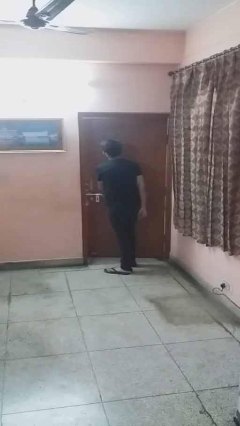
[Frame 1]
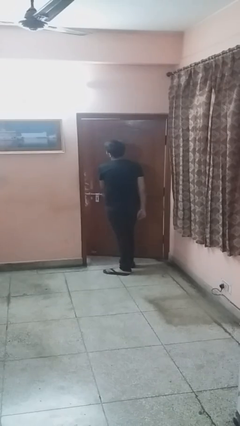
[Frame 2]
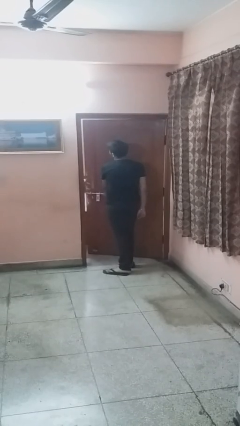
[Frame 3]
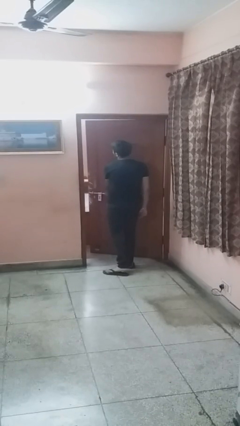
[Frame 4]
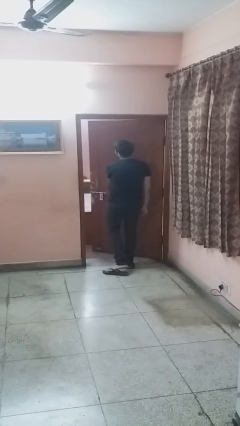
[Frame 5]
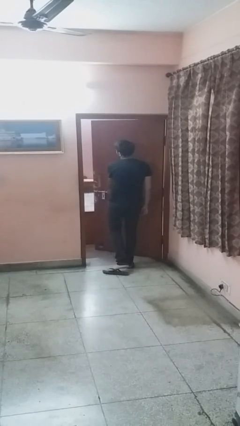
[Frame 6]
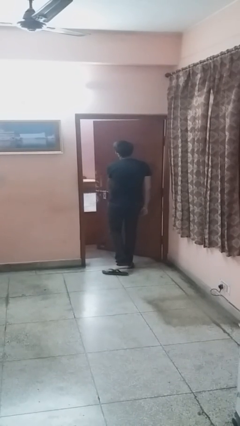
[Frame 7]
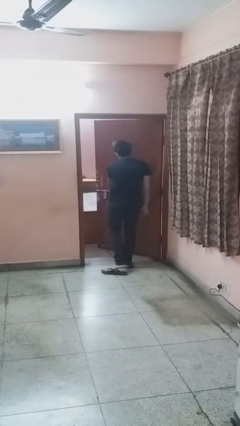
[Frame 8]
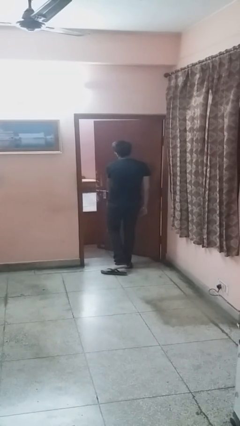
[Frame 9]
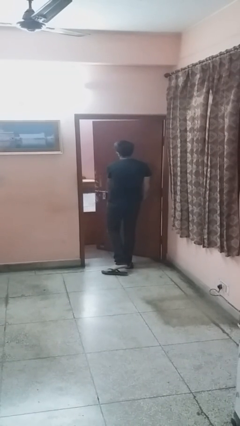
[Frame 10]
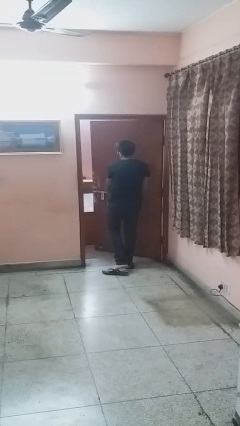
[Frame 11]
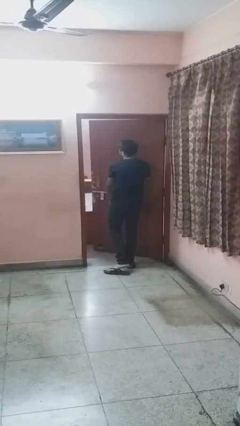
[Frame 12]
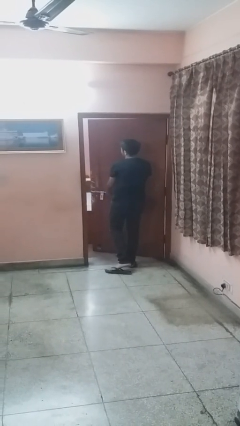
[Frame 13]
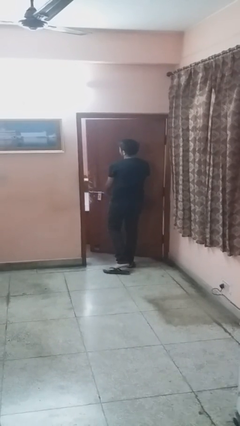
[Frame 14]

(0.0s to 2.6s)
person opens facility door

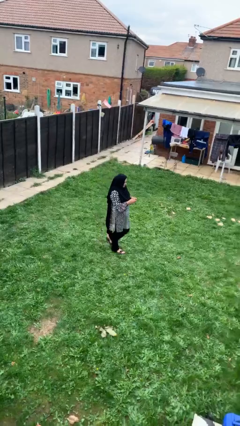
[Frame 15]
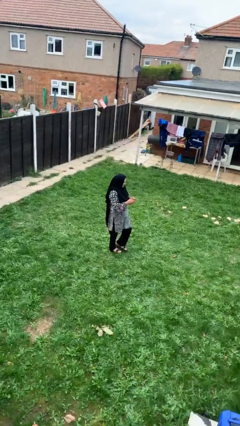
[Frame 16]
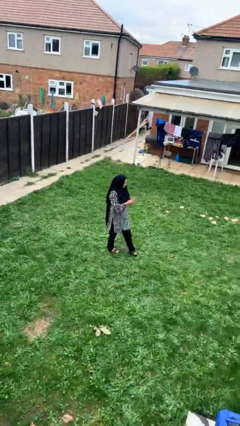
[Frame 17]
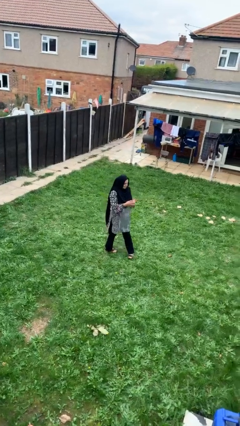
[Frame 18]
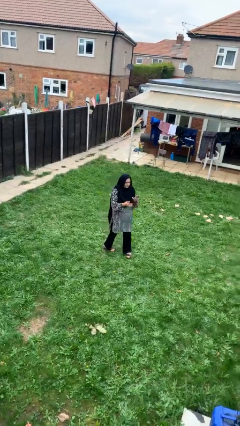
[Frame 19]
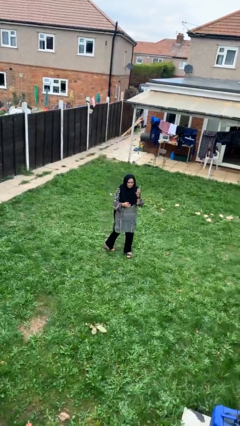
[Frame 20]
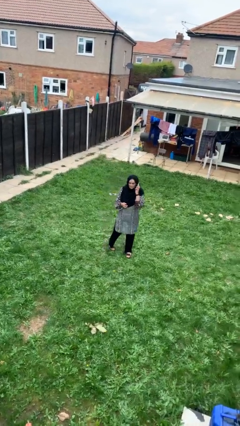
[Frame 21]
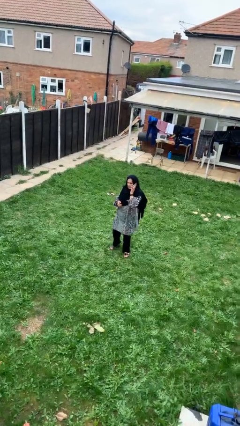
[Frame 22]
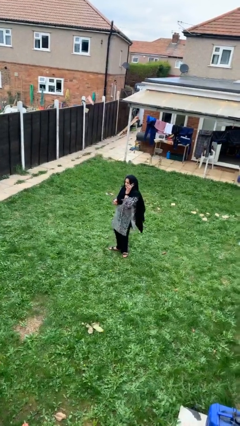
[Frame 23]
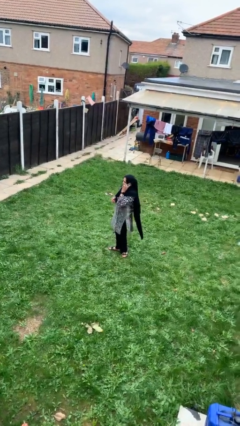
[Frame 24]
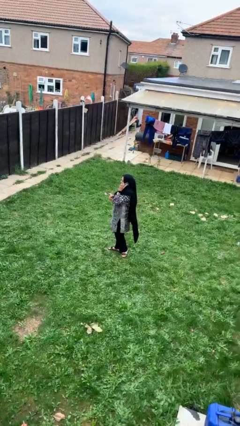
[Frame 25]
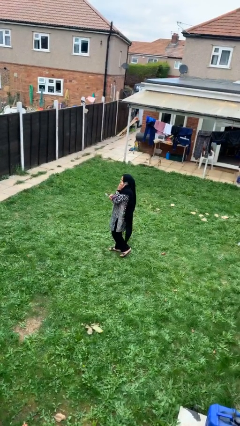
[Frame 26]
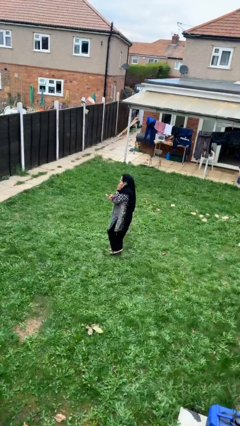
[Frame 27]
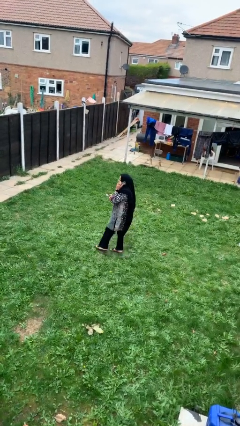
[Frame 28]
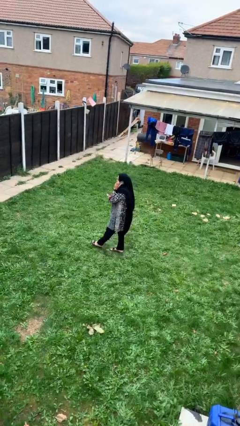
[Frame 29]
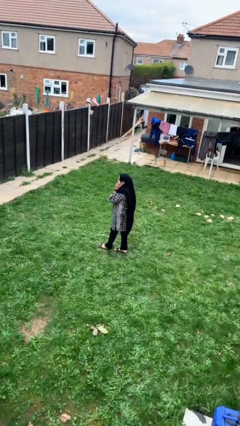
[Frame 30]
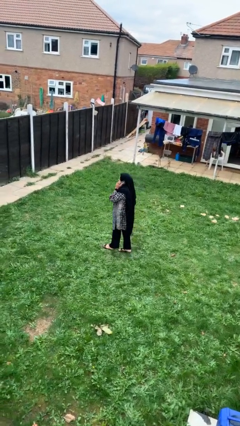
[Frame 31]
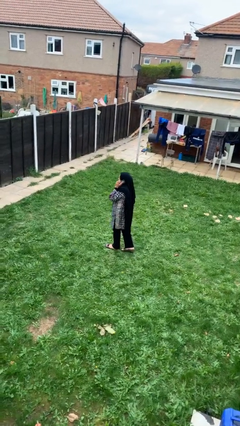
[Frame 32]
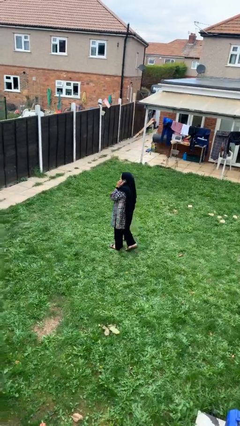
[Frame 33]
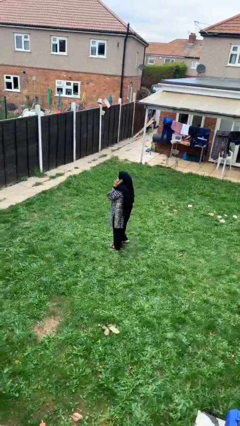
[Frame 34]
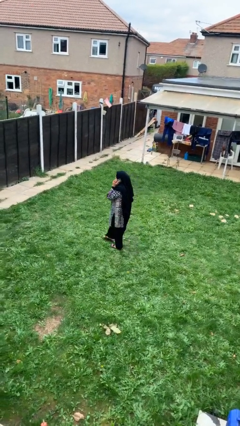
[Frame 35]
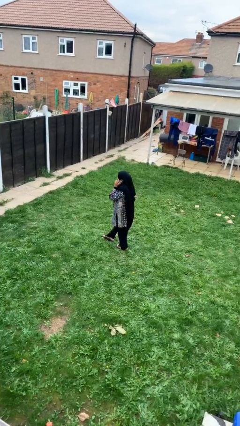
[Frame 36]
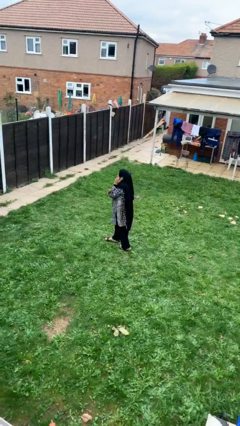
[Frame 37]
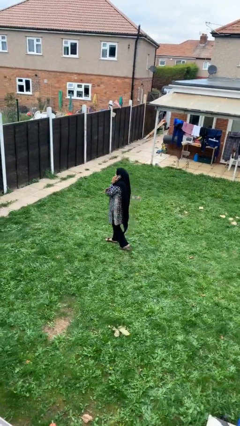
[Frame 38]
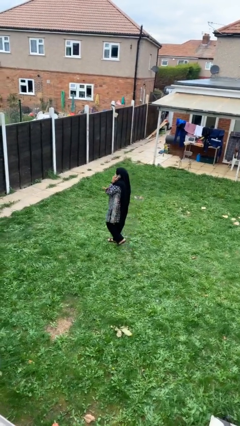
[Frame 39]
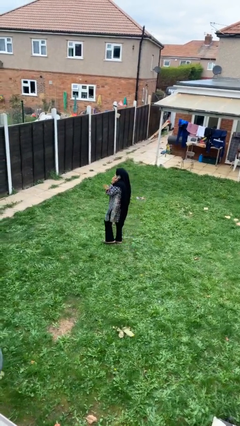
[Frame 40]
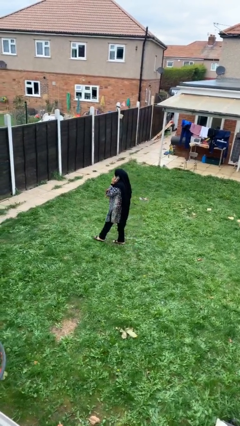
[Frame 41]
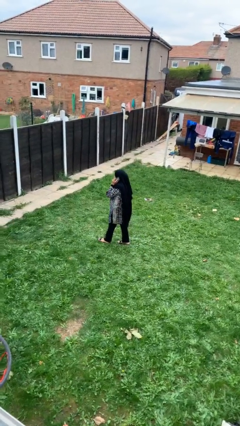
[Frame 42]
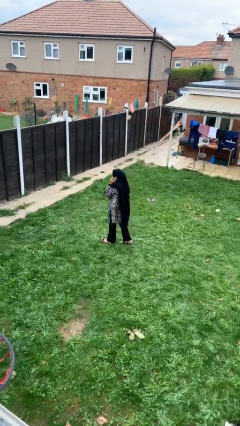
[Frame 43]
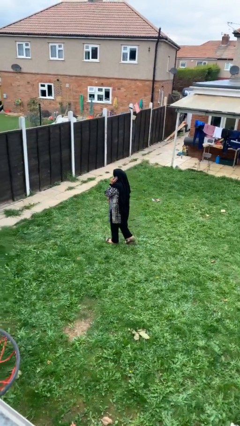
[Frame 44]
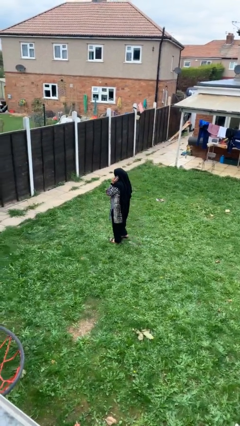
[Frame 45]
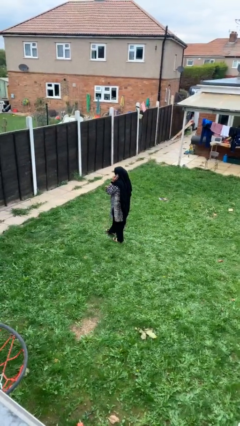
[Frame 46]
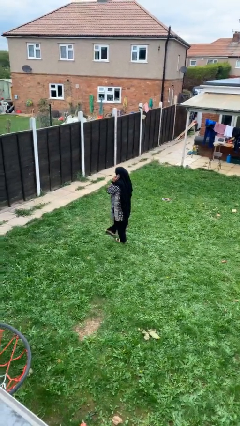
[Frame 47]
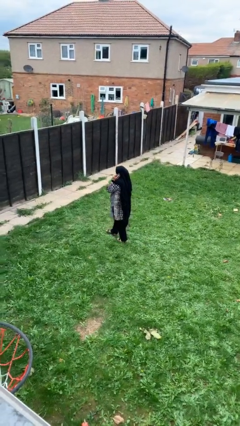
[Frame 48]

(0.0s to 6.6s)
person talks on phone

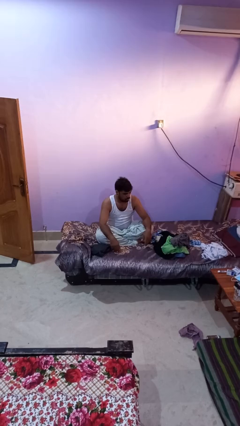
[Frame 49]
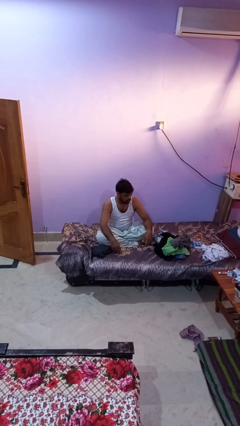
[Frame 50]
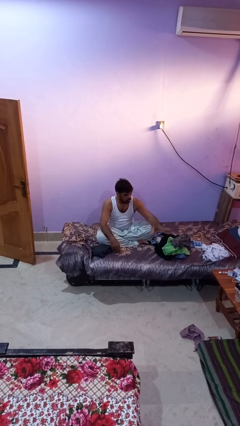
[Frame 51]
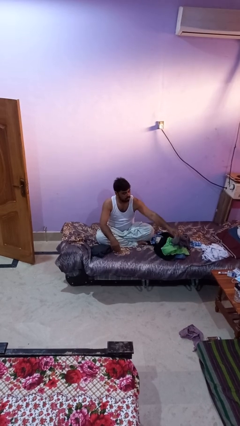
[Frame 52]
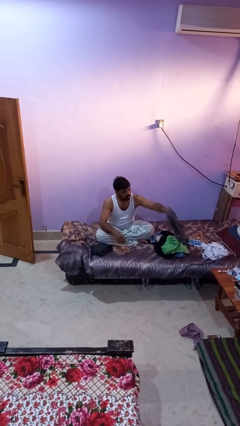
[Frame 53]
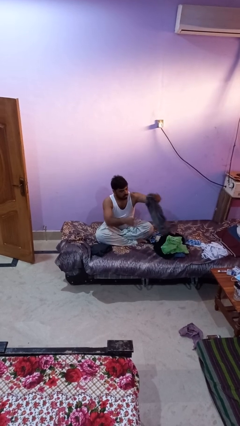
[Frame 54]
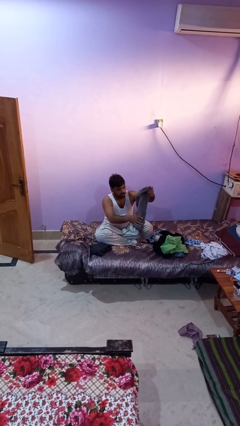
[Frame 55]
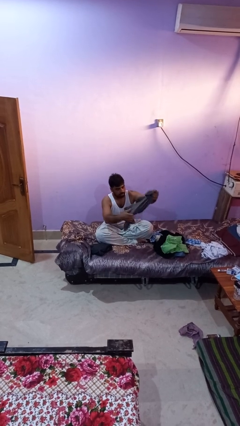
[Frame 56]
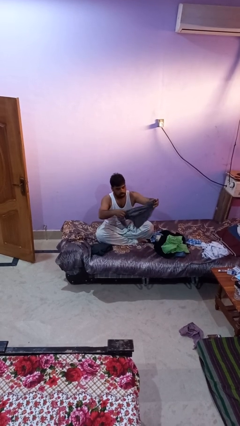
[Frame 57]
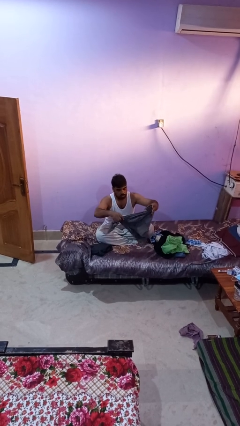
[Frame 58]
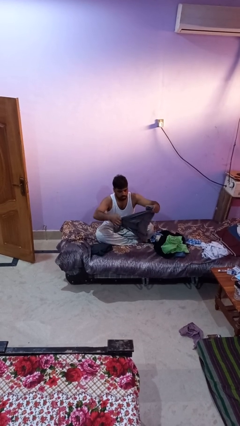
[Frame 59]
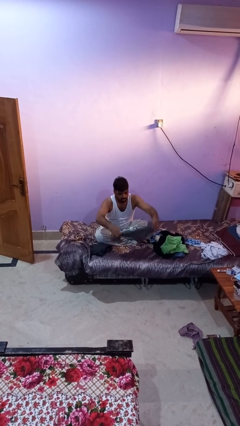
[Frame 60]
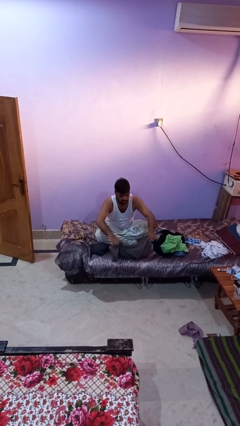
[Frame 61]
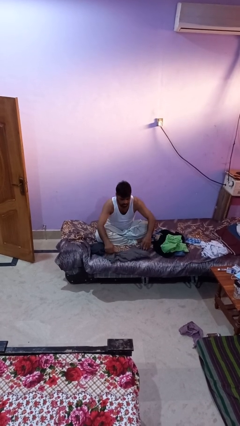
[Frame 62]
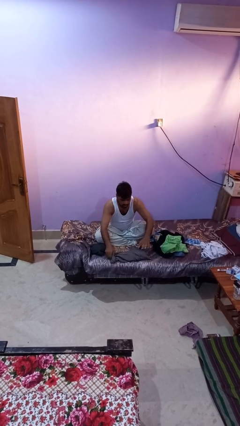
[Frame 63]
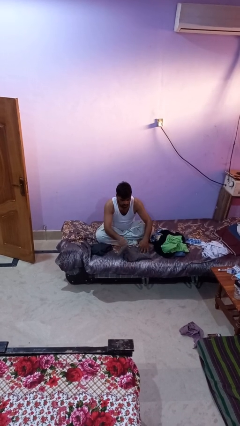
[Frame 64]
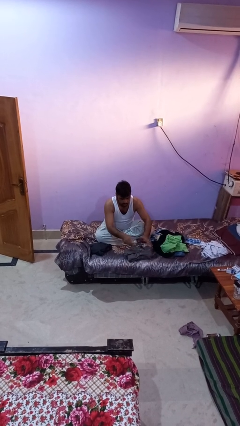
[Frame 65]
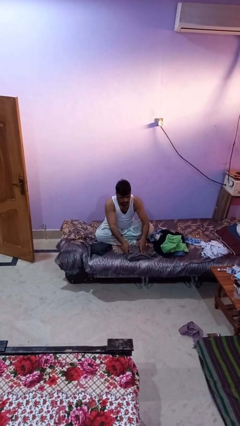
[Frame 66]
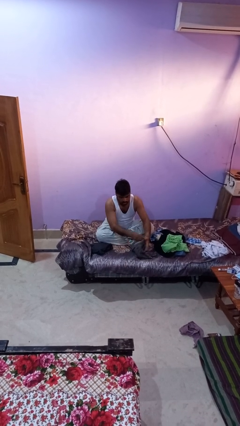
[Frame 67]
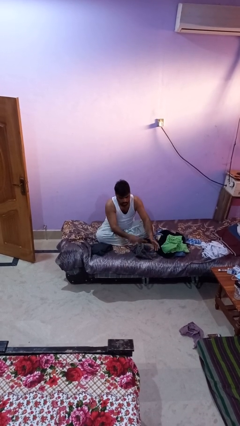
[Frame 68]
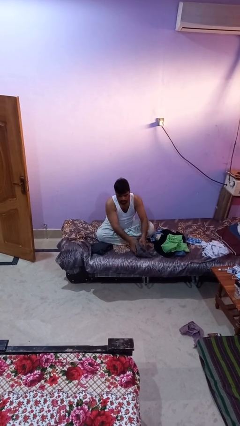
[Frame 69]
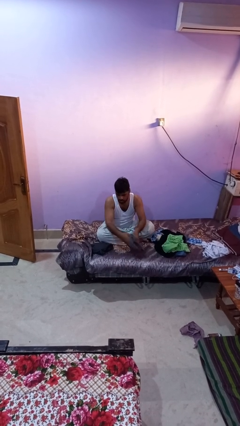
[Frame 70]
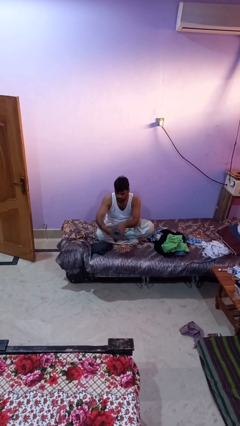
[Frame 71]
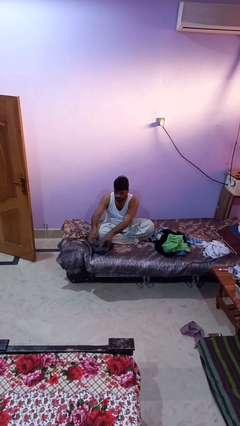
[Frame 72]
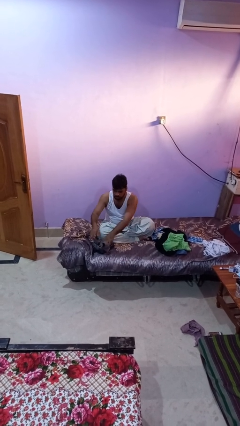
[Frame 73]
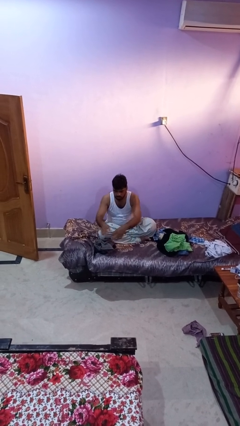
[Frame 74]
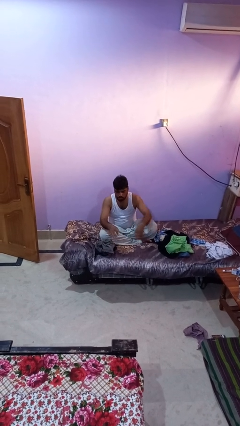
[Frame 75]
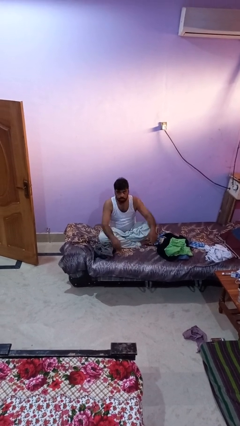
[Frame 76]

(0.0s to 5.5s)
person folds shirt

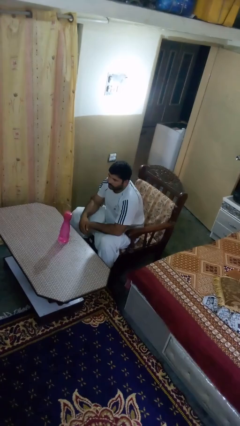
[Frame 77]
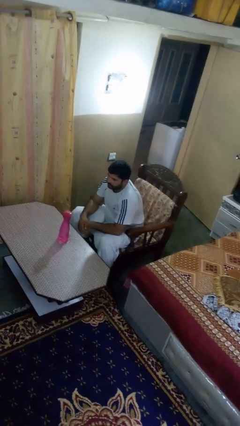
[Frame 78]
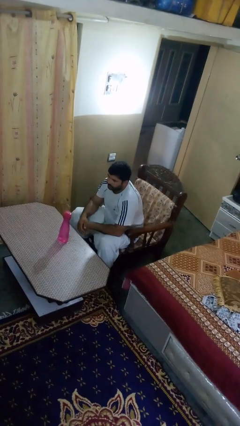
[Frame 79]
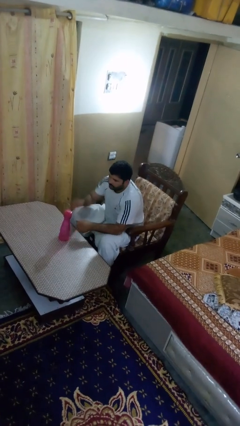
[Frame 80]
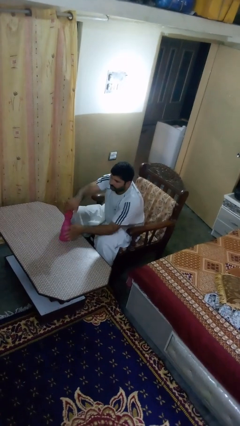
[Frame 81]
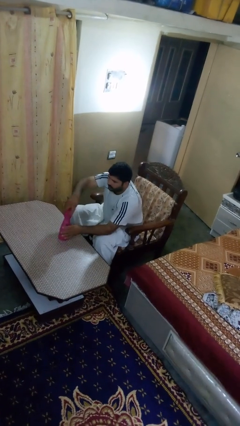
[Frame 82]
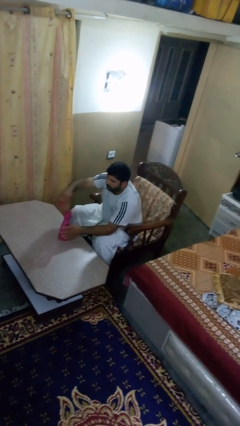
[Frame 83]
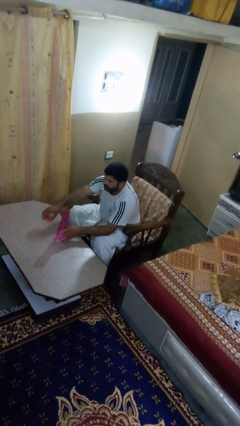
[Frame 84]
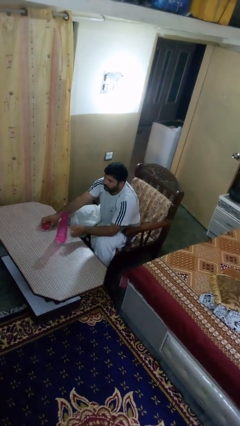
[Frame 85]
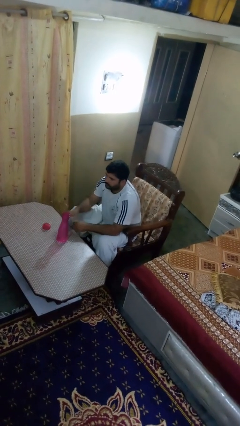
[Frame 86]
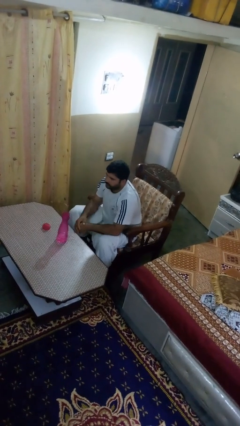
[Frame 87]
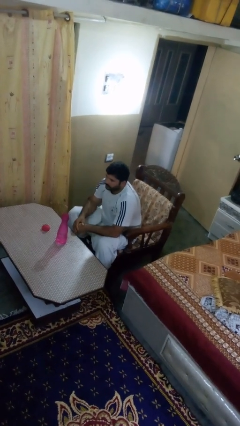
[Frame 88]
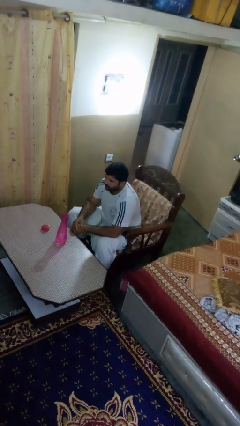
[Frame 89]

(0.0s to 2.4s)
person unscrews lid from bottle

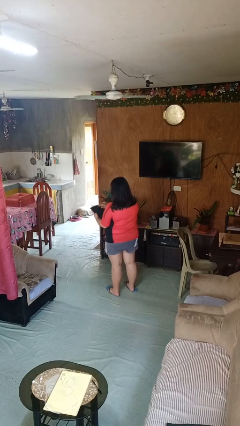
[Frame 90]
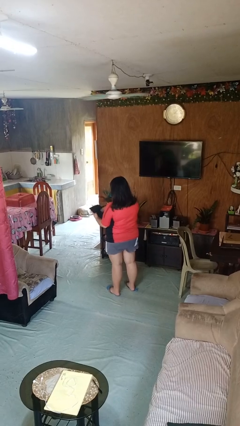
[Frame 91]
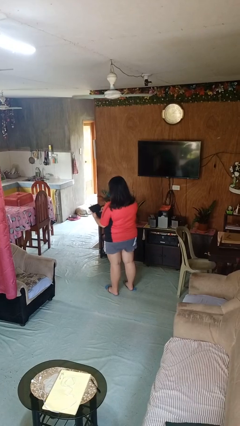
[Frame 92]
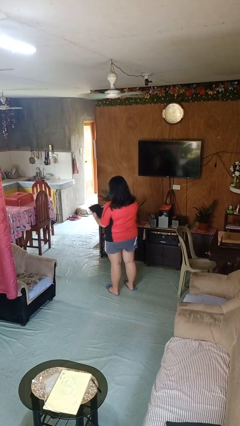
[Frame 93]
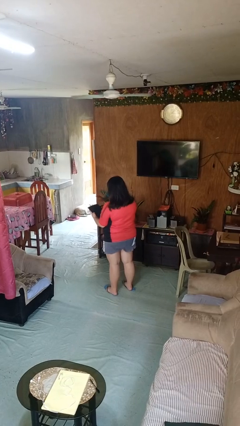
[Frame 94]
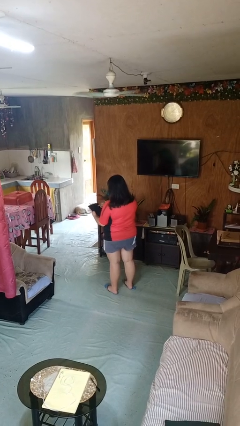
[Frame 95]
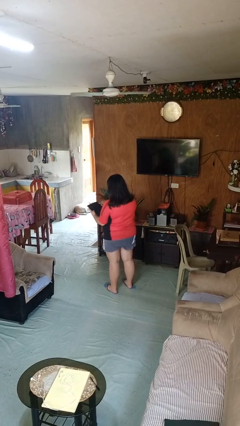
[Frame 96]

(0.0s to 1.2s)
person interacts with tablet
